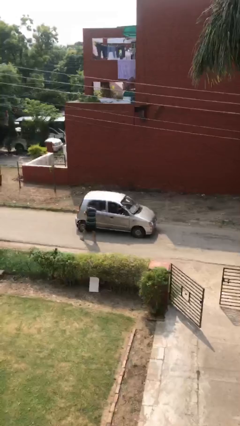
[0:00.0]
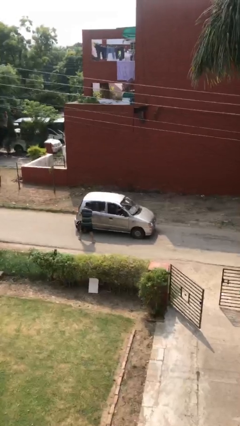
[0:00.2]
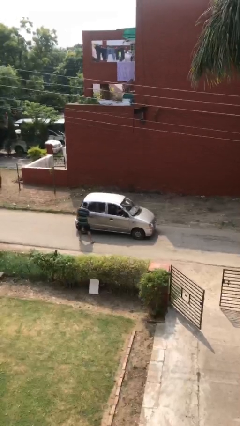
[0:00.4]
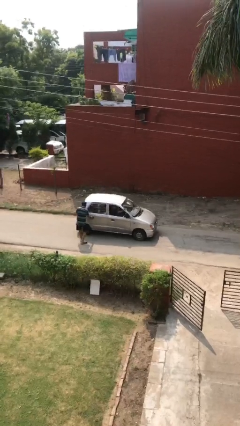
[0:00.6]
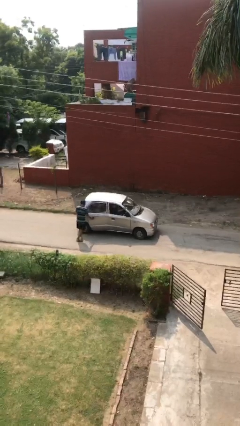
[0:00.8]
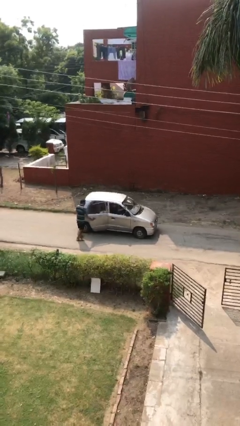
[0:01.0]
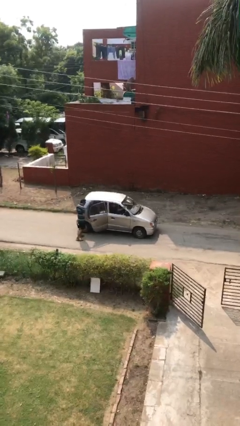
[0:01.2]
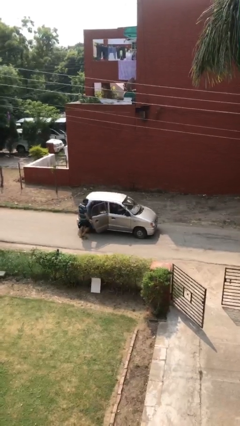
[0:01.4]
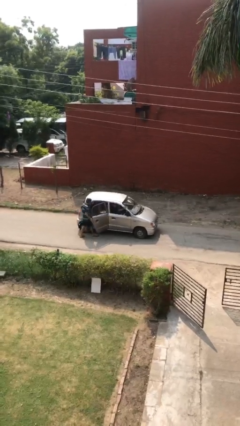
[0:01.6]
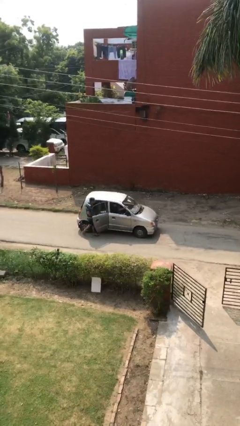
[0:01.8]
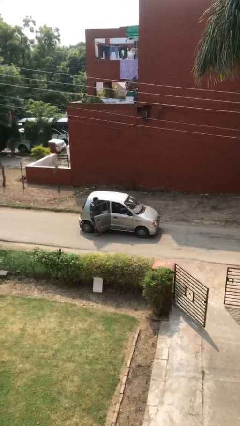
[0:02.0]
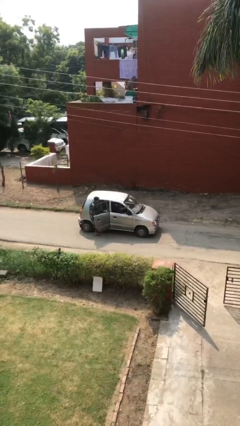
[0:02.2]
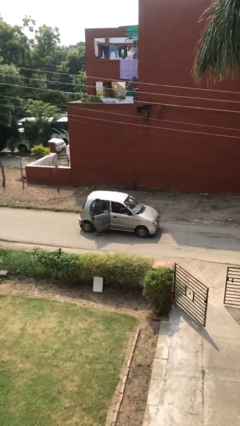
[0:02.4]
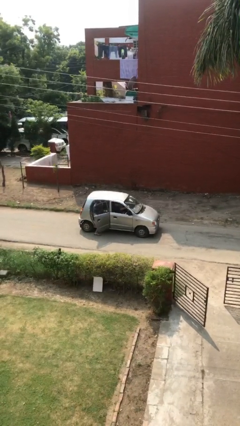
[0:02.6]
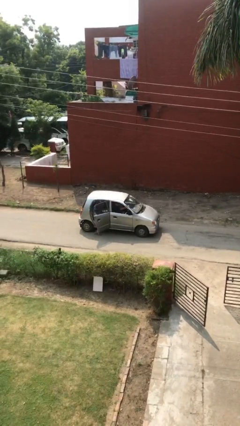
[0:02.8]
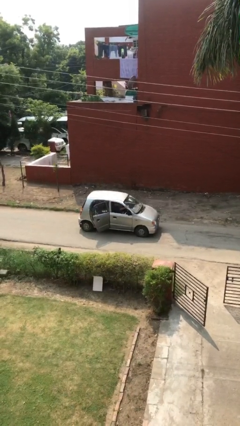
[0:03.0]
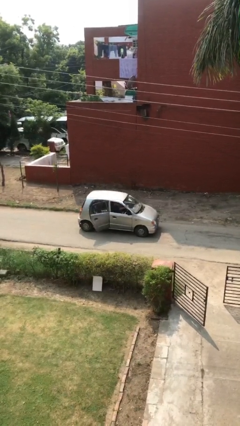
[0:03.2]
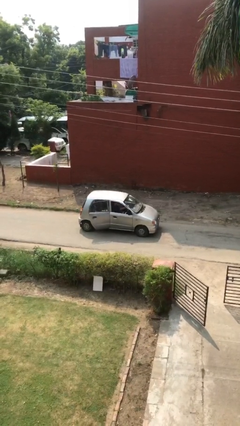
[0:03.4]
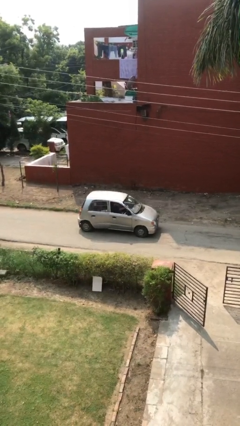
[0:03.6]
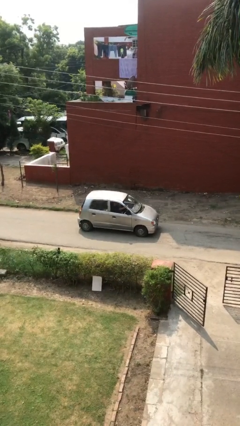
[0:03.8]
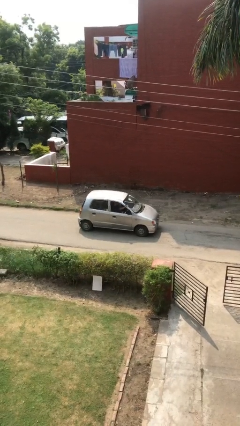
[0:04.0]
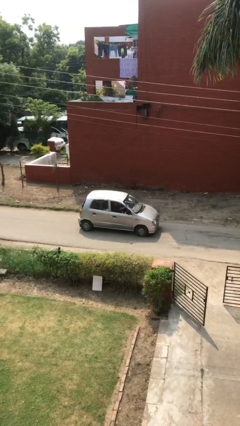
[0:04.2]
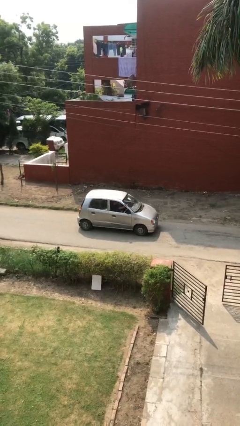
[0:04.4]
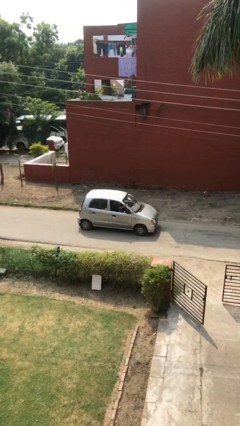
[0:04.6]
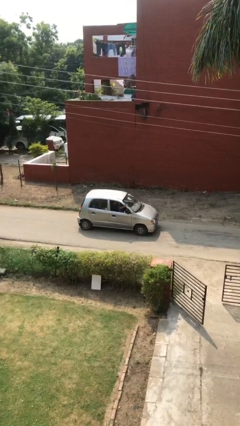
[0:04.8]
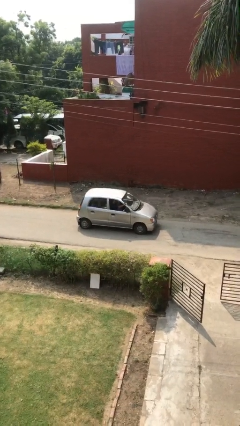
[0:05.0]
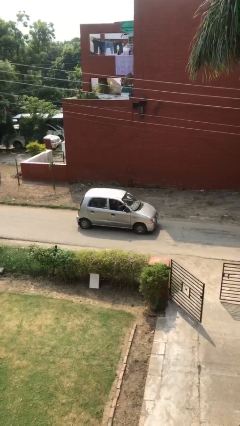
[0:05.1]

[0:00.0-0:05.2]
car picks up person

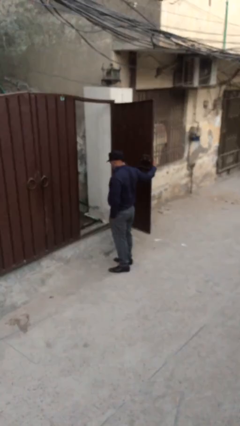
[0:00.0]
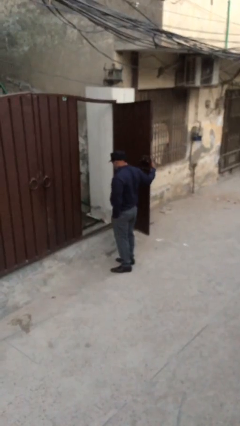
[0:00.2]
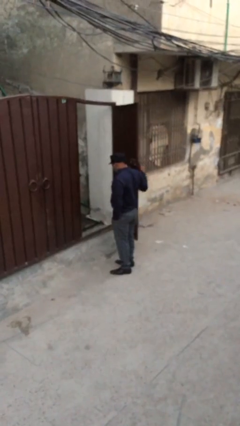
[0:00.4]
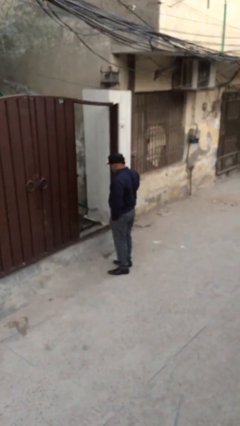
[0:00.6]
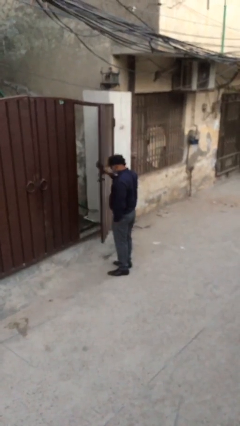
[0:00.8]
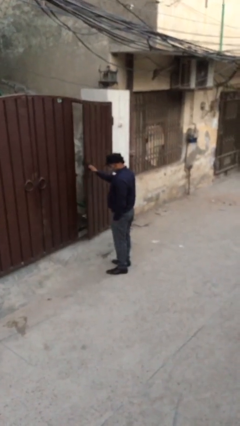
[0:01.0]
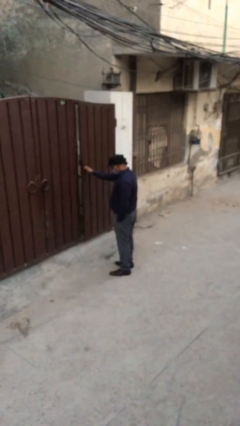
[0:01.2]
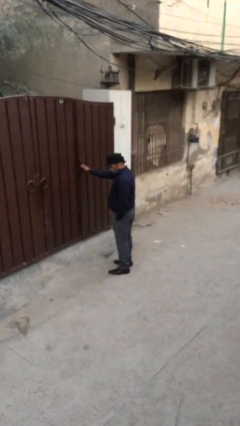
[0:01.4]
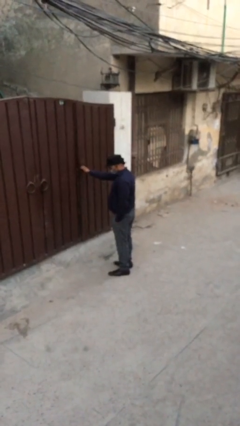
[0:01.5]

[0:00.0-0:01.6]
person closes facility door

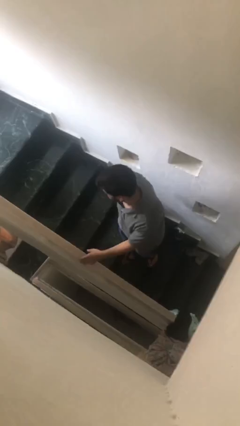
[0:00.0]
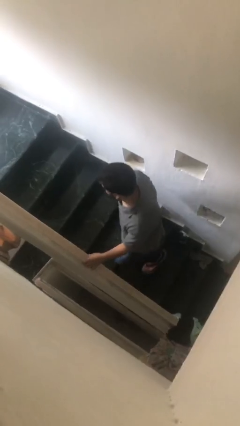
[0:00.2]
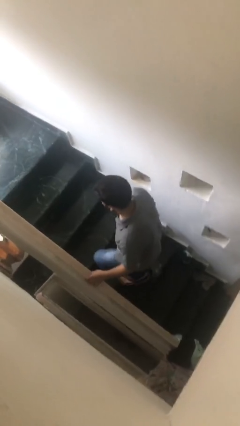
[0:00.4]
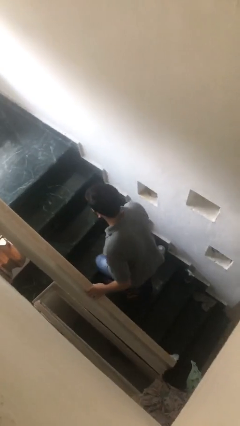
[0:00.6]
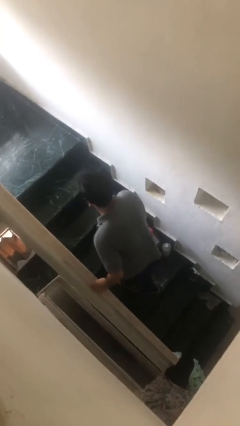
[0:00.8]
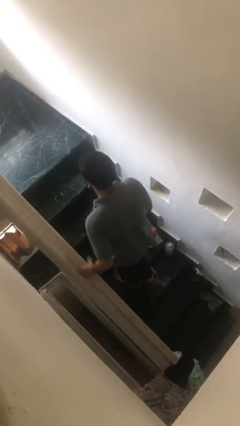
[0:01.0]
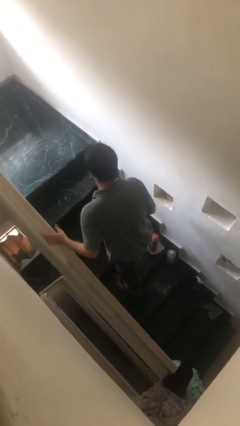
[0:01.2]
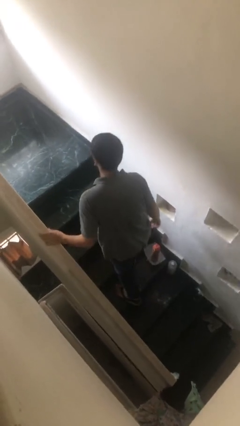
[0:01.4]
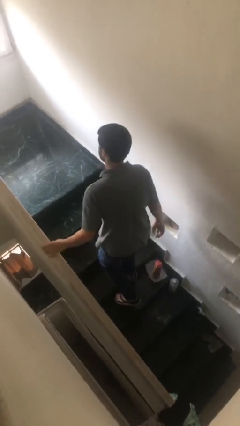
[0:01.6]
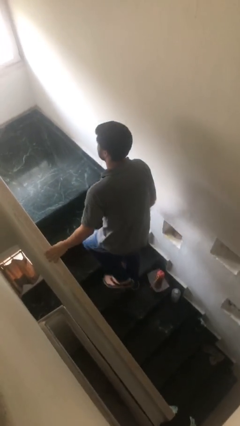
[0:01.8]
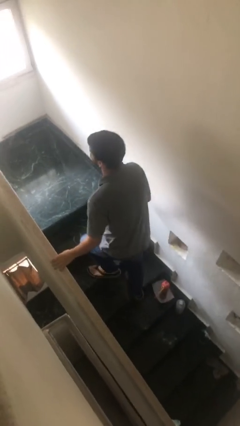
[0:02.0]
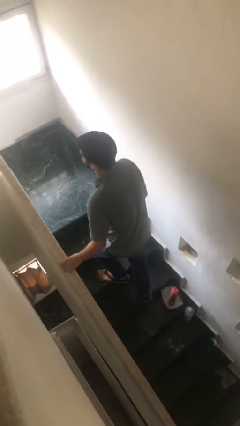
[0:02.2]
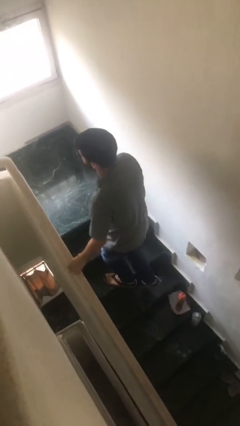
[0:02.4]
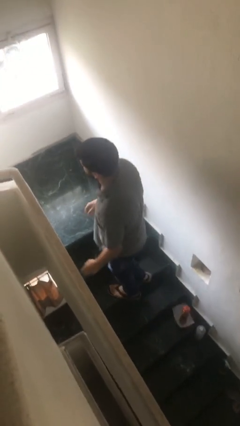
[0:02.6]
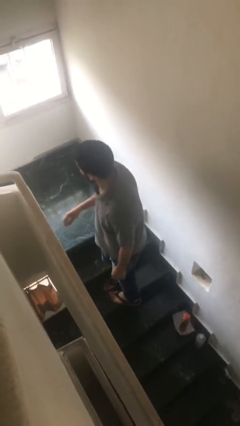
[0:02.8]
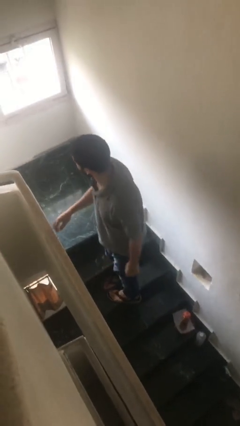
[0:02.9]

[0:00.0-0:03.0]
person climbs up stairs

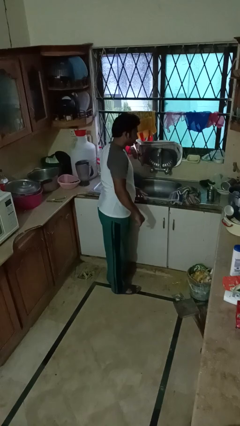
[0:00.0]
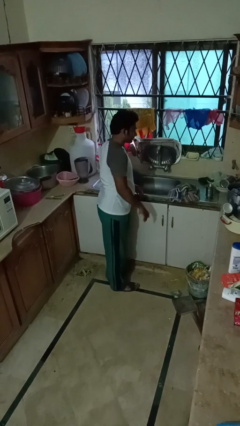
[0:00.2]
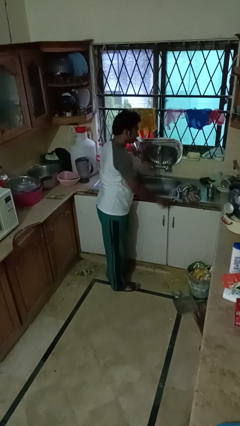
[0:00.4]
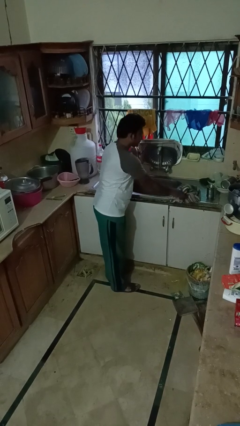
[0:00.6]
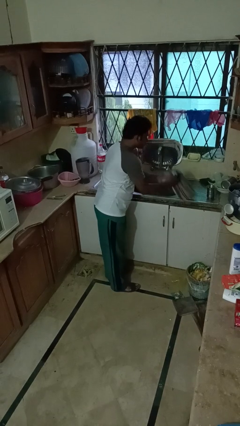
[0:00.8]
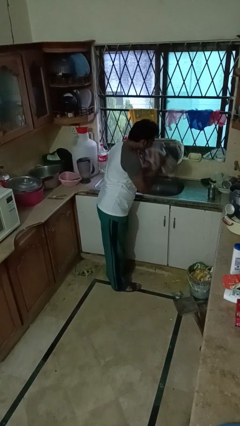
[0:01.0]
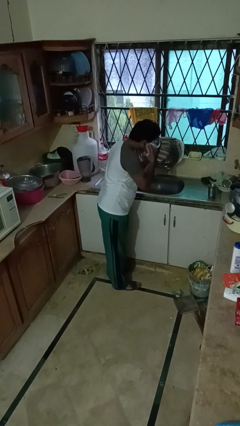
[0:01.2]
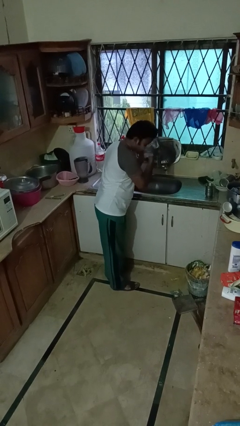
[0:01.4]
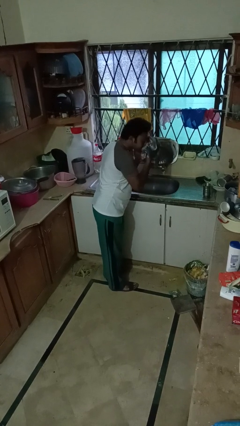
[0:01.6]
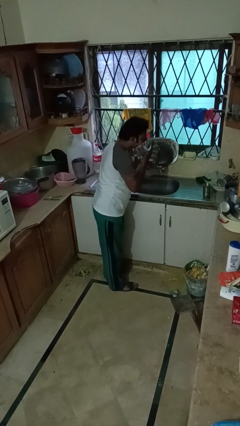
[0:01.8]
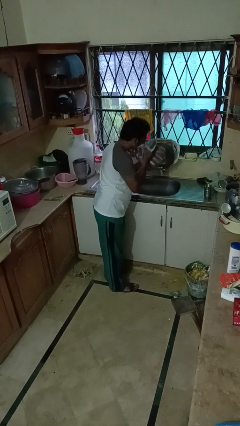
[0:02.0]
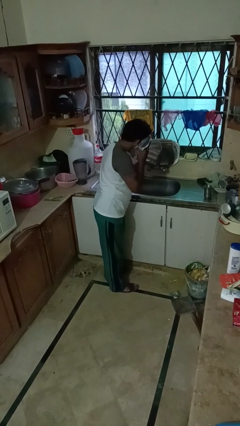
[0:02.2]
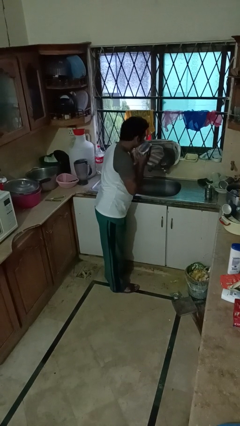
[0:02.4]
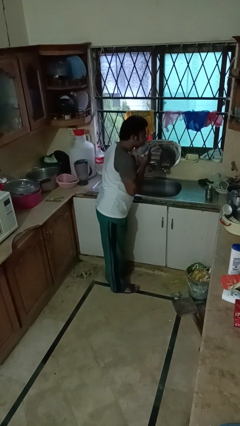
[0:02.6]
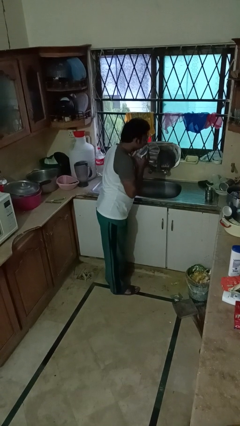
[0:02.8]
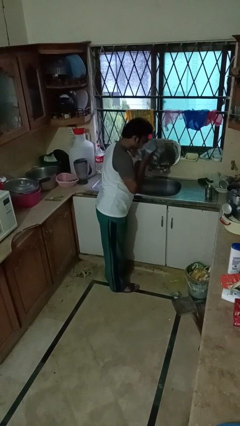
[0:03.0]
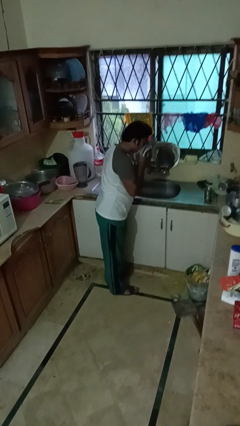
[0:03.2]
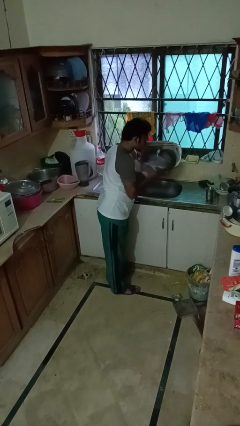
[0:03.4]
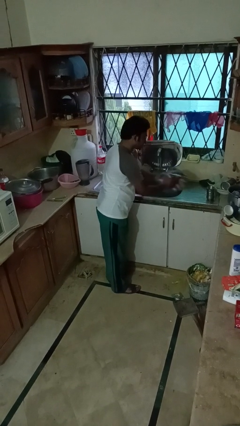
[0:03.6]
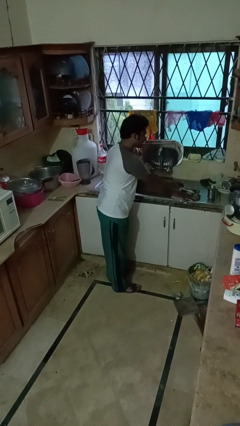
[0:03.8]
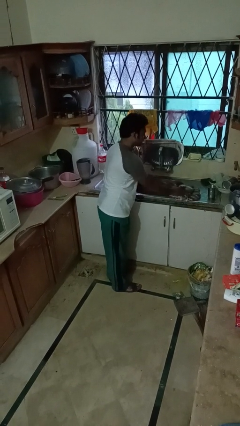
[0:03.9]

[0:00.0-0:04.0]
person dries face with towel

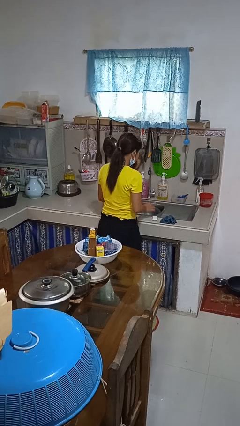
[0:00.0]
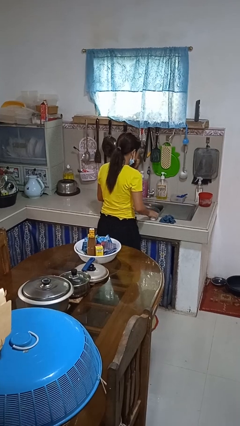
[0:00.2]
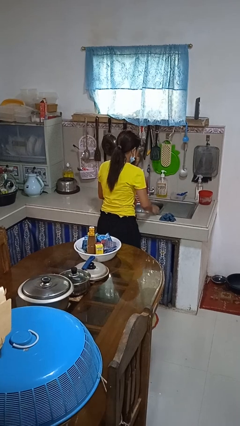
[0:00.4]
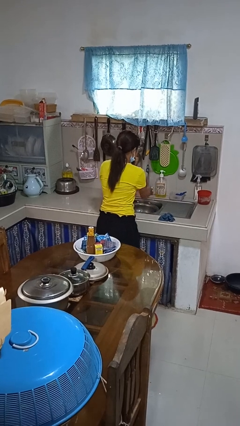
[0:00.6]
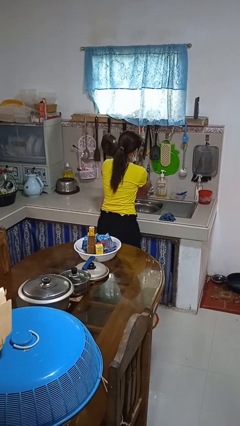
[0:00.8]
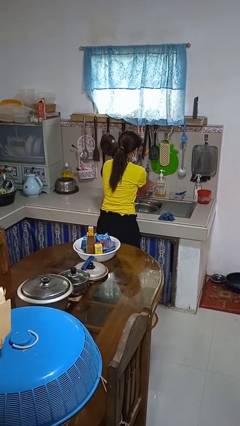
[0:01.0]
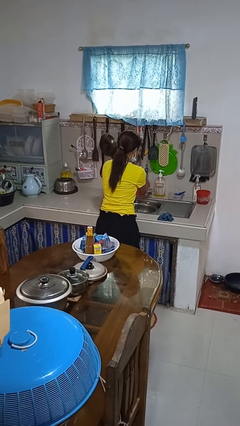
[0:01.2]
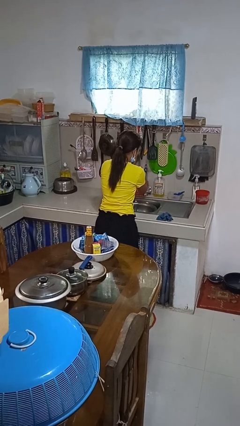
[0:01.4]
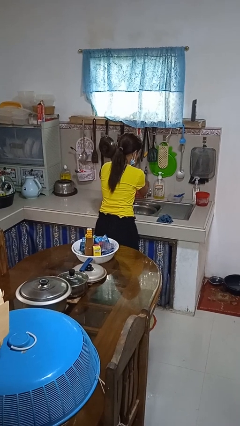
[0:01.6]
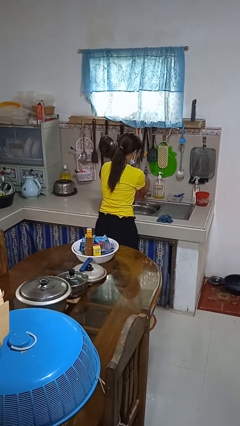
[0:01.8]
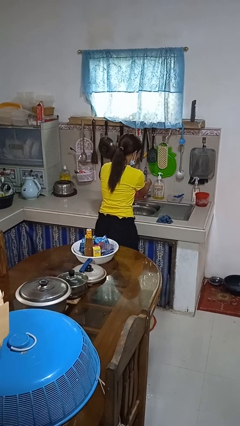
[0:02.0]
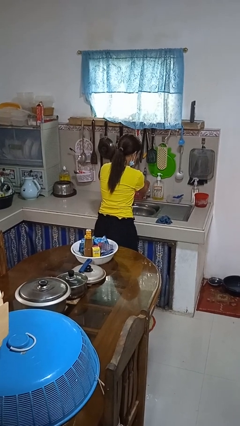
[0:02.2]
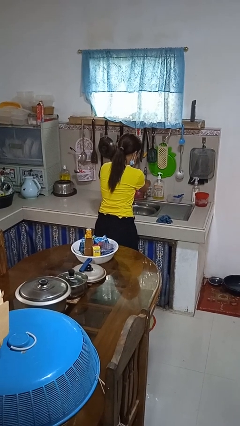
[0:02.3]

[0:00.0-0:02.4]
person washes hands

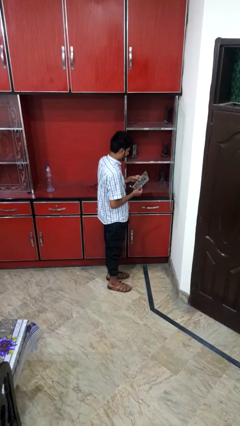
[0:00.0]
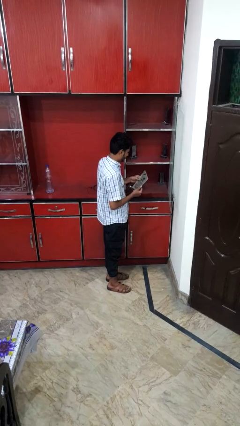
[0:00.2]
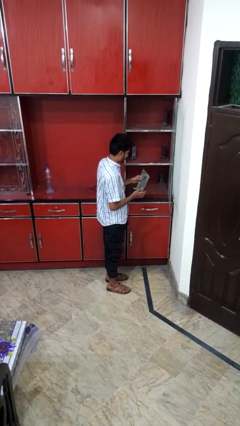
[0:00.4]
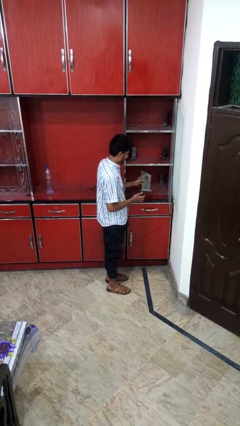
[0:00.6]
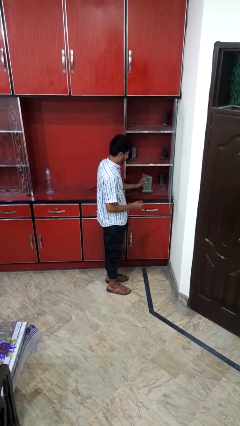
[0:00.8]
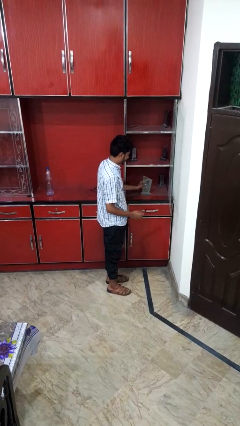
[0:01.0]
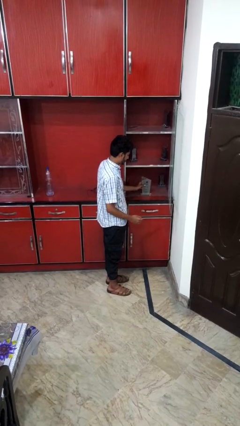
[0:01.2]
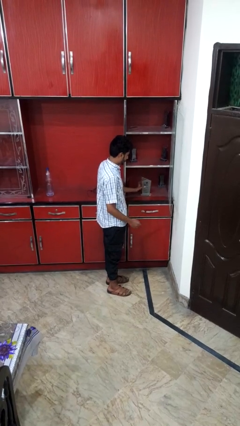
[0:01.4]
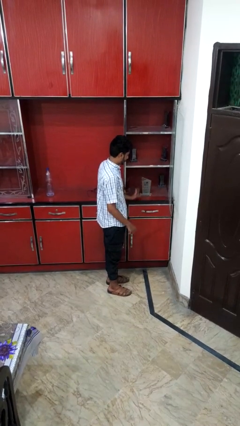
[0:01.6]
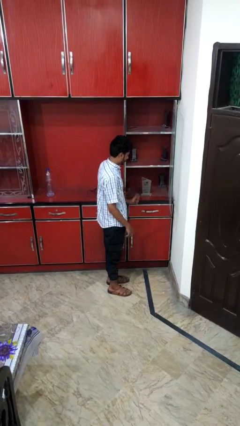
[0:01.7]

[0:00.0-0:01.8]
person puts down object into cabinet
